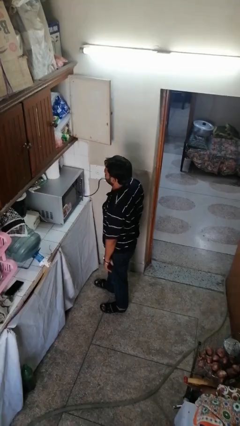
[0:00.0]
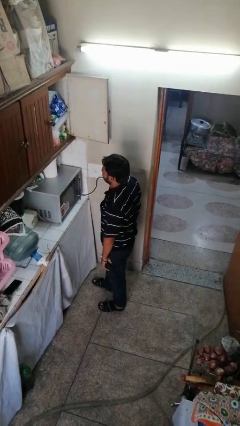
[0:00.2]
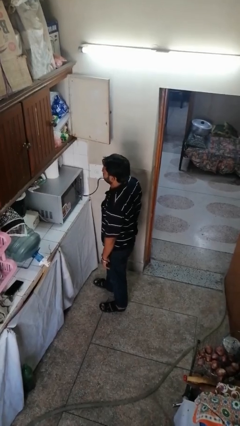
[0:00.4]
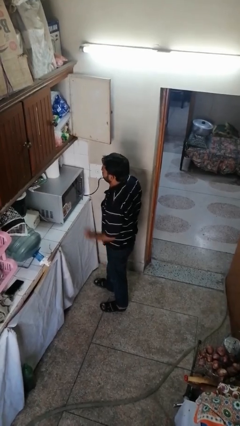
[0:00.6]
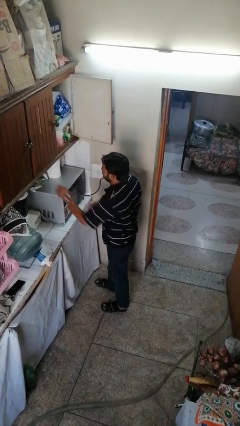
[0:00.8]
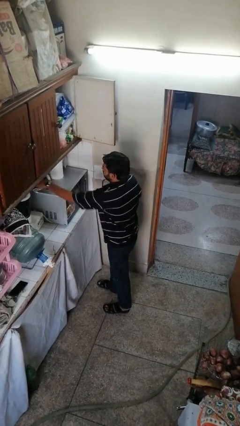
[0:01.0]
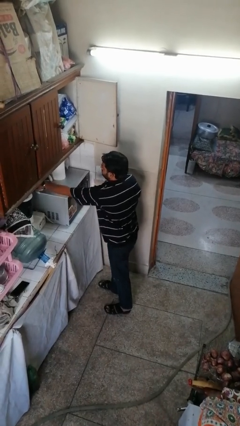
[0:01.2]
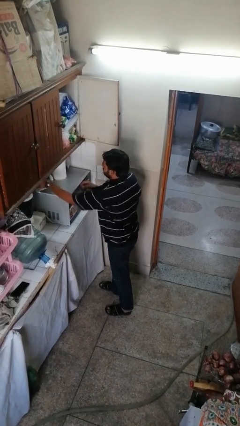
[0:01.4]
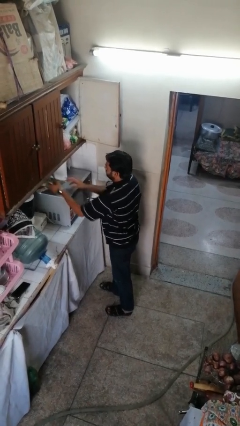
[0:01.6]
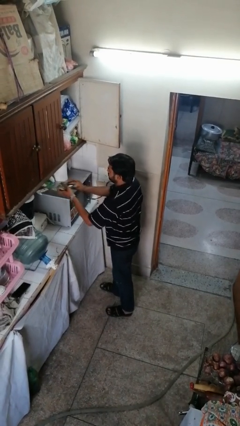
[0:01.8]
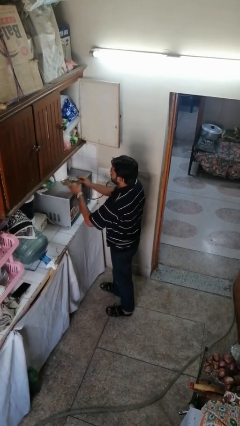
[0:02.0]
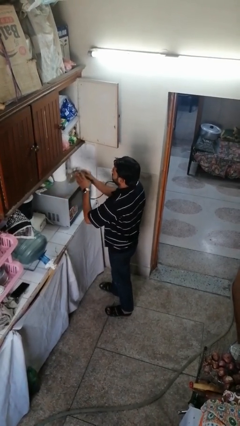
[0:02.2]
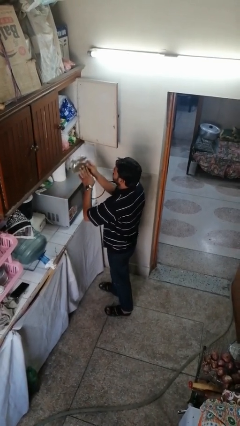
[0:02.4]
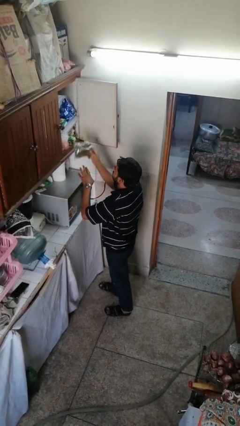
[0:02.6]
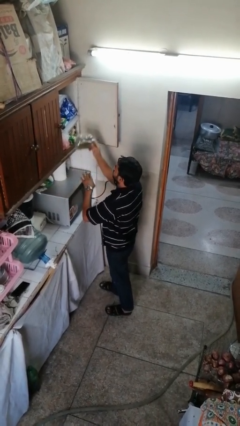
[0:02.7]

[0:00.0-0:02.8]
person loads groceries into cabinet

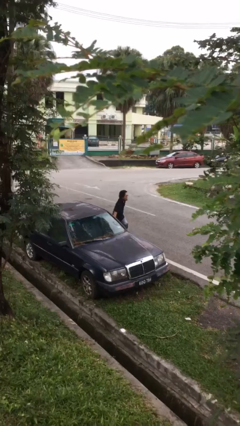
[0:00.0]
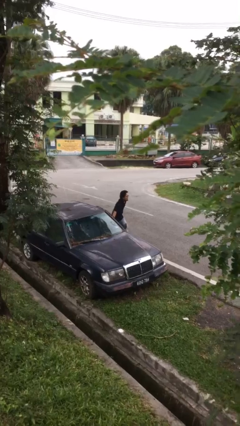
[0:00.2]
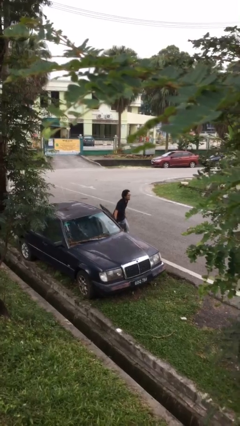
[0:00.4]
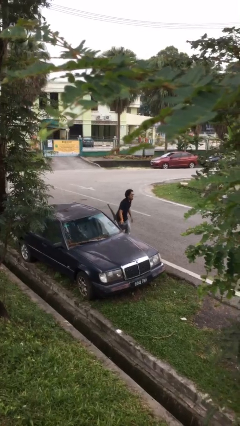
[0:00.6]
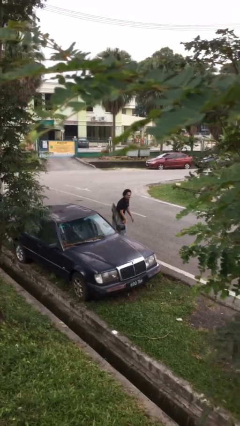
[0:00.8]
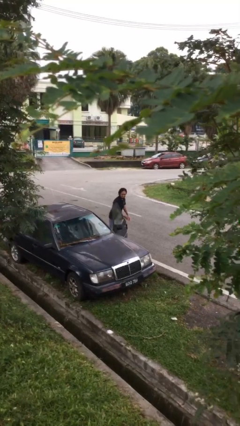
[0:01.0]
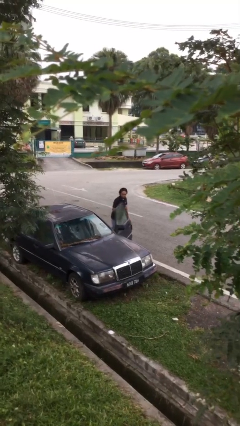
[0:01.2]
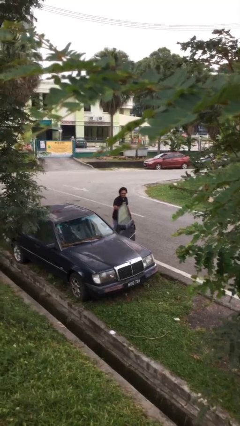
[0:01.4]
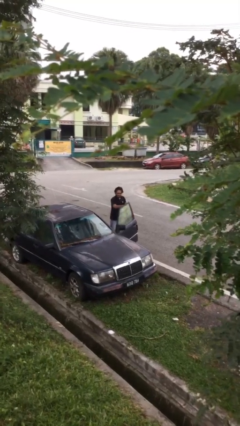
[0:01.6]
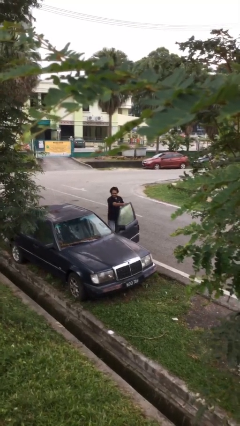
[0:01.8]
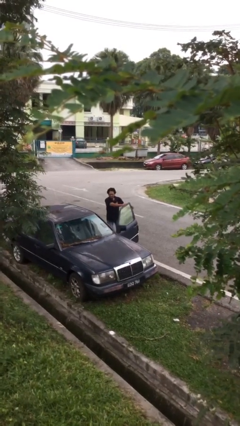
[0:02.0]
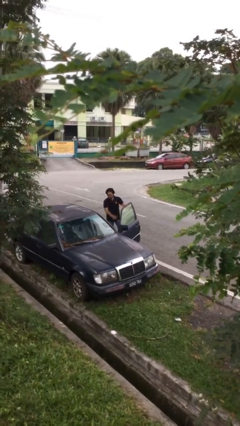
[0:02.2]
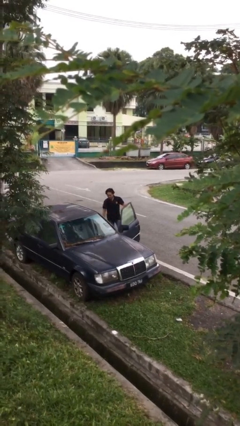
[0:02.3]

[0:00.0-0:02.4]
person opens car door

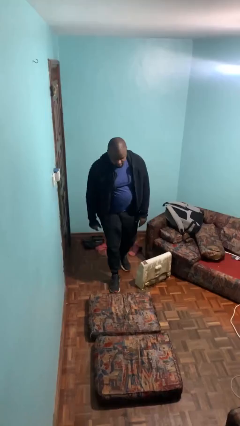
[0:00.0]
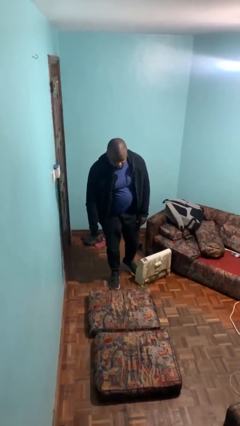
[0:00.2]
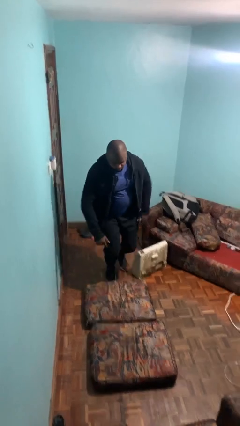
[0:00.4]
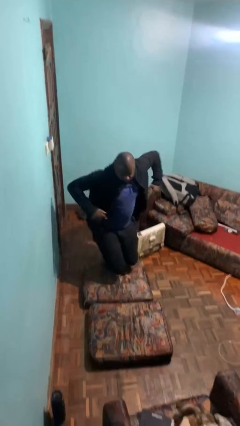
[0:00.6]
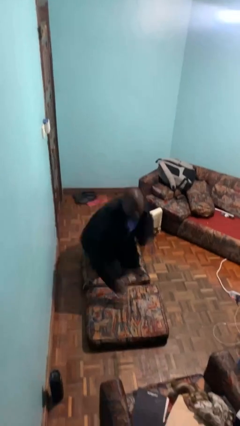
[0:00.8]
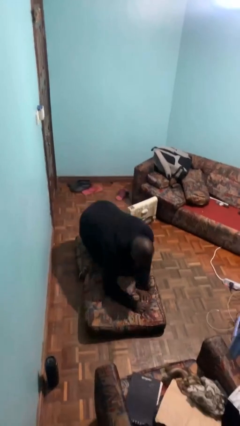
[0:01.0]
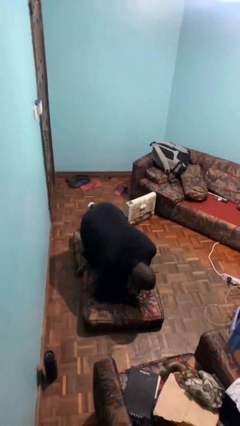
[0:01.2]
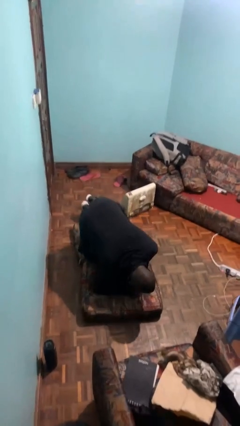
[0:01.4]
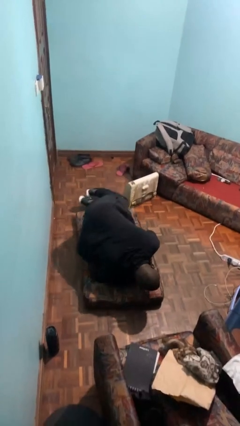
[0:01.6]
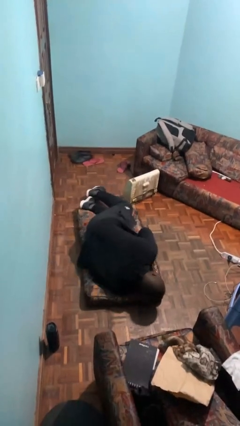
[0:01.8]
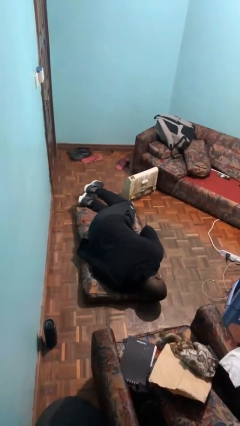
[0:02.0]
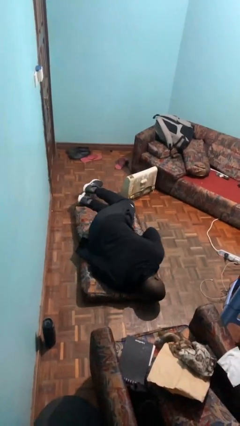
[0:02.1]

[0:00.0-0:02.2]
person trips on object on floor

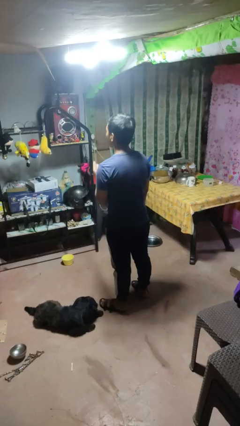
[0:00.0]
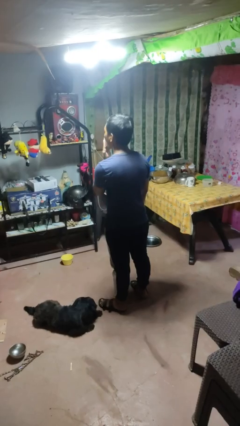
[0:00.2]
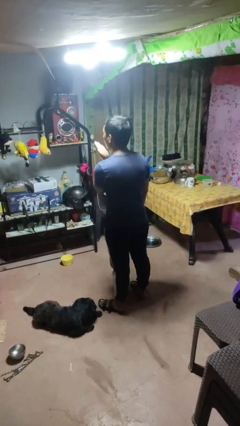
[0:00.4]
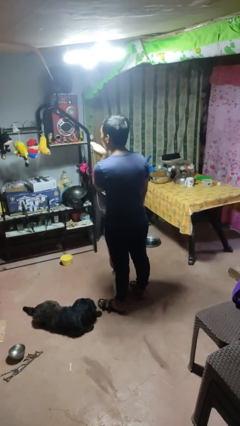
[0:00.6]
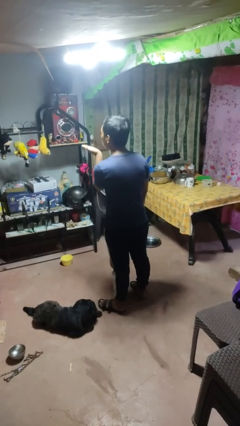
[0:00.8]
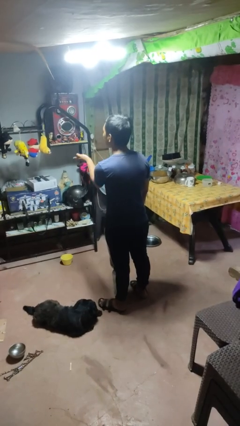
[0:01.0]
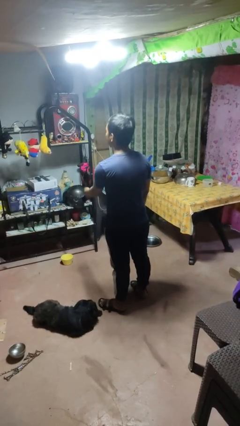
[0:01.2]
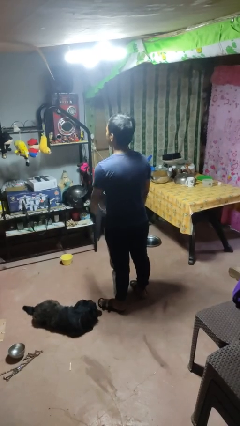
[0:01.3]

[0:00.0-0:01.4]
person gestures blow kiss

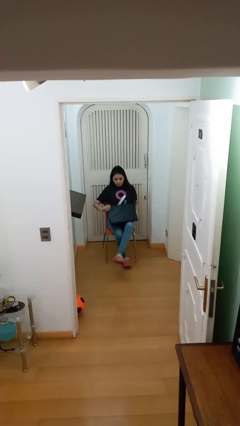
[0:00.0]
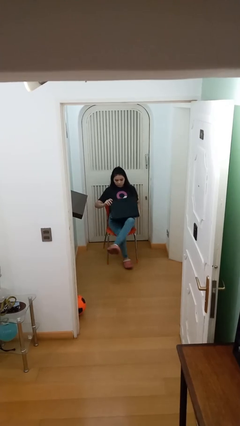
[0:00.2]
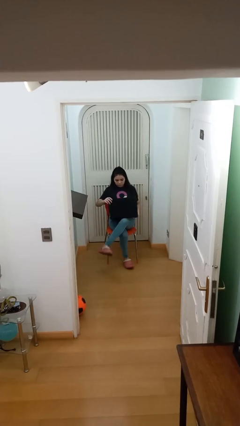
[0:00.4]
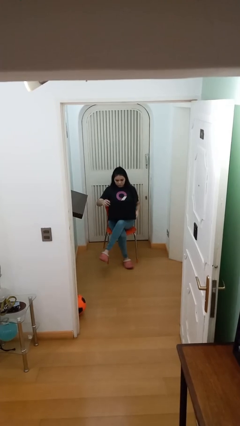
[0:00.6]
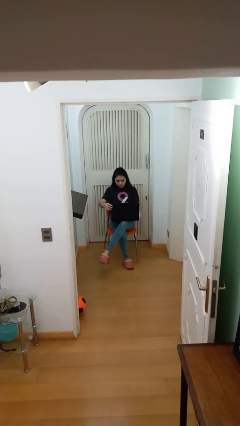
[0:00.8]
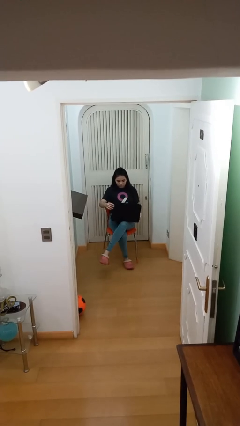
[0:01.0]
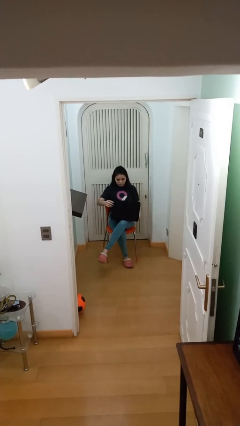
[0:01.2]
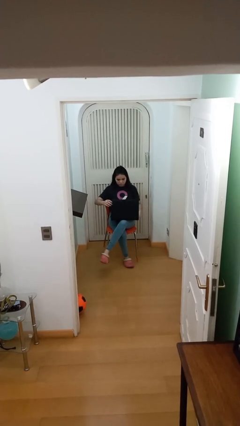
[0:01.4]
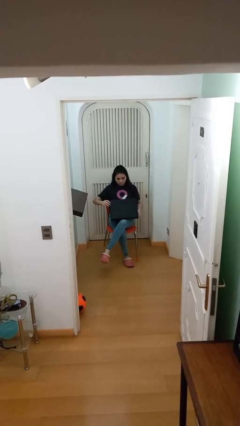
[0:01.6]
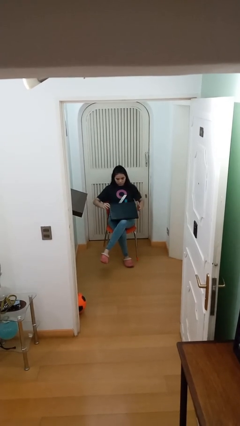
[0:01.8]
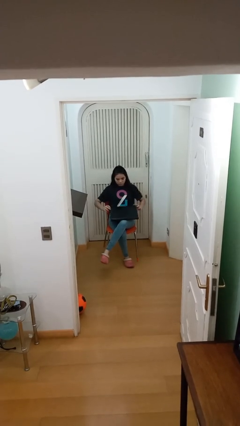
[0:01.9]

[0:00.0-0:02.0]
person interacts with laptop

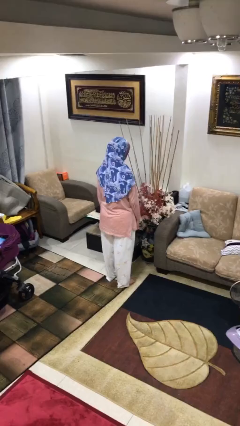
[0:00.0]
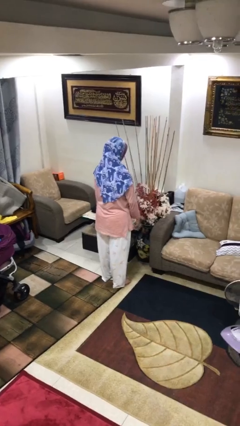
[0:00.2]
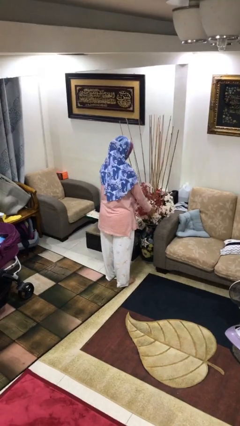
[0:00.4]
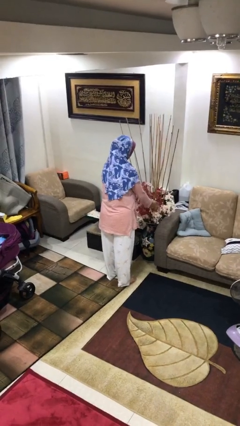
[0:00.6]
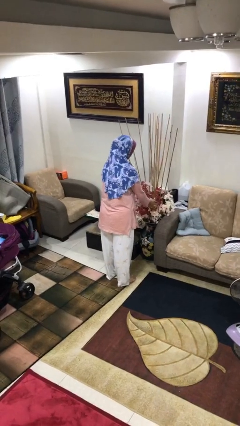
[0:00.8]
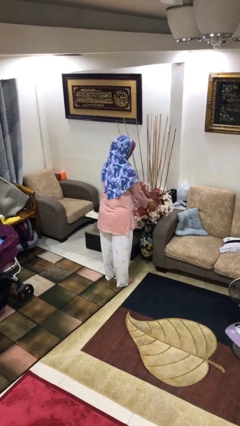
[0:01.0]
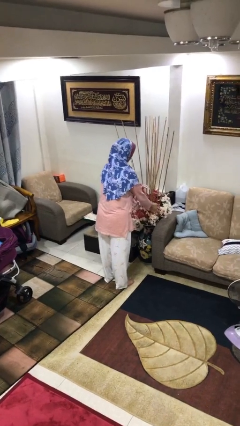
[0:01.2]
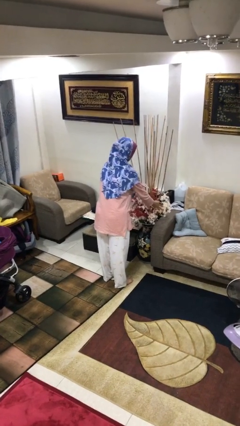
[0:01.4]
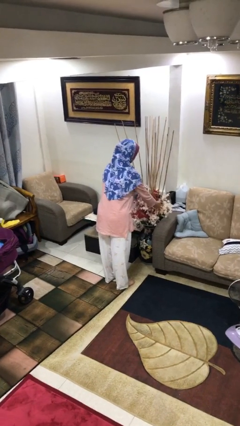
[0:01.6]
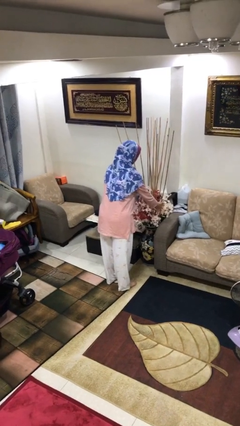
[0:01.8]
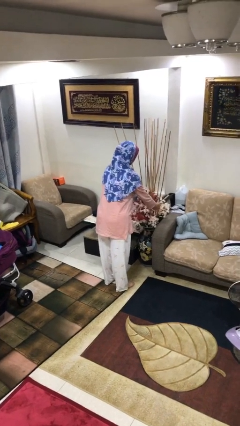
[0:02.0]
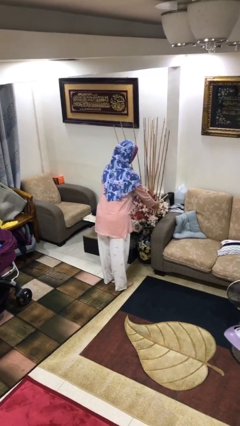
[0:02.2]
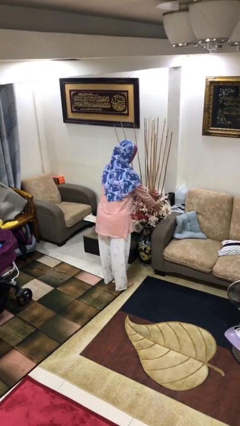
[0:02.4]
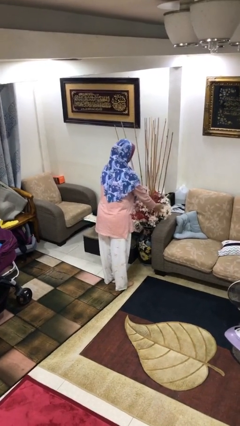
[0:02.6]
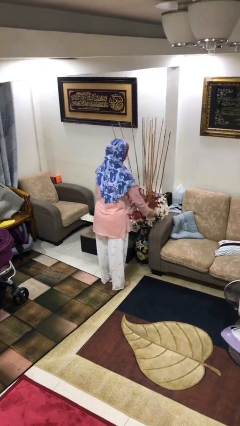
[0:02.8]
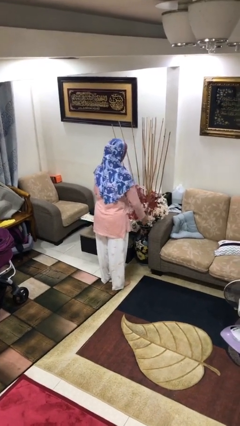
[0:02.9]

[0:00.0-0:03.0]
person arranges flowers in vase

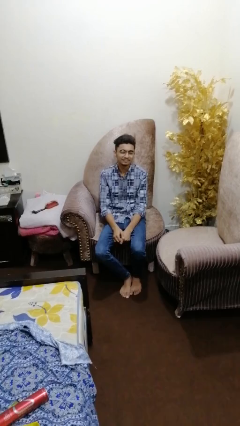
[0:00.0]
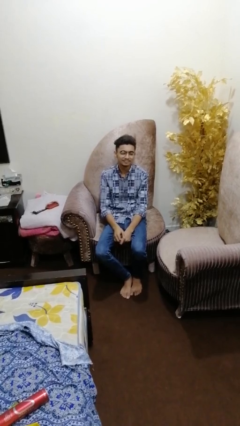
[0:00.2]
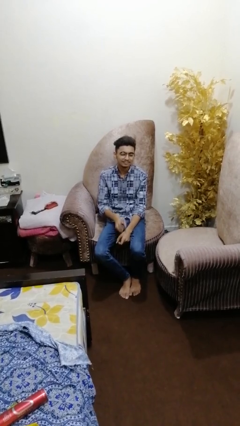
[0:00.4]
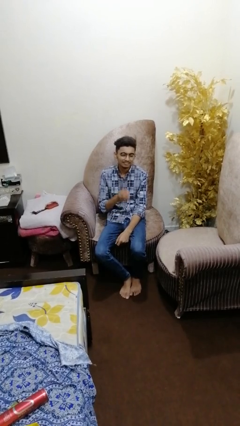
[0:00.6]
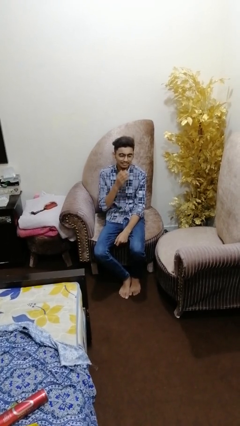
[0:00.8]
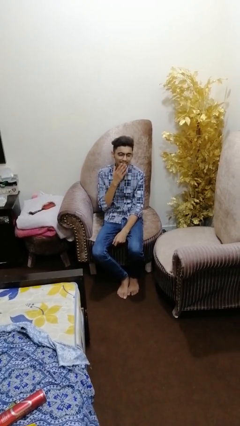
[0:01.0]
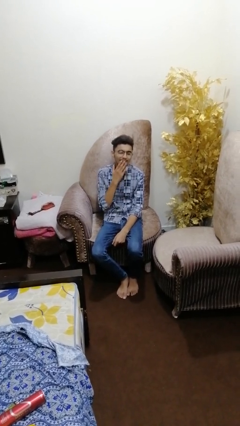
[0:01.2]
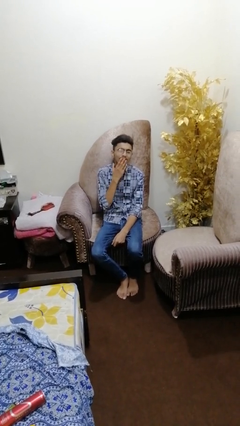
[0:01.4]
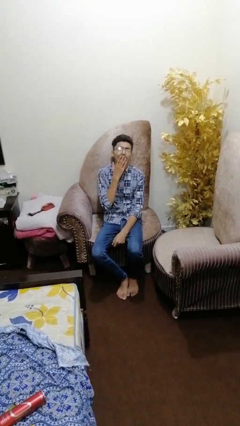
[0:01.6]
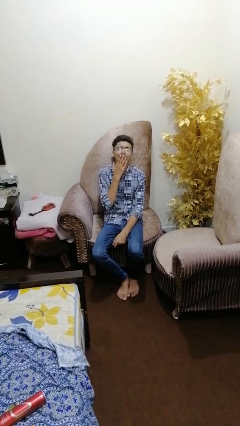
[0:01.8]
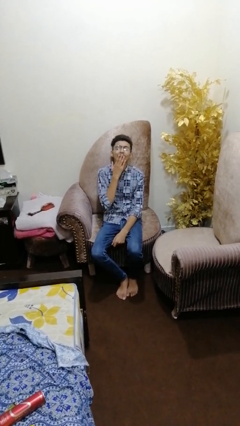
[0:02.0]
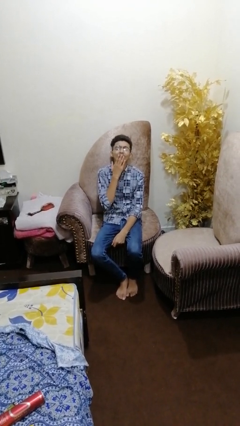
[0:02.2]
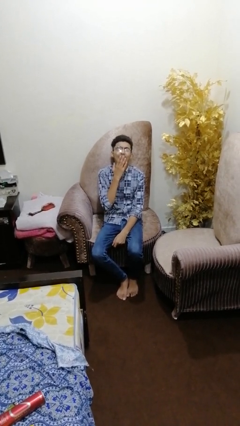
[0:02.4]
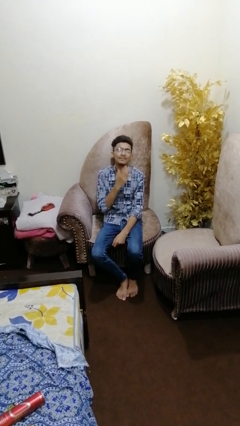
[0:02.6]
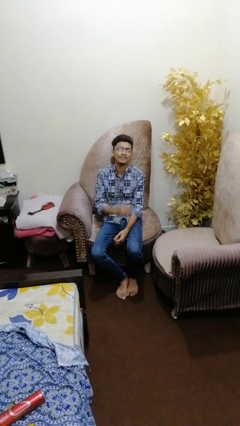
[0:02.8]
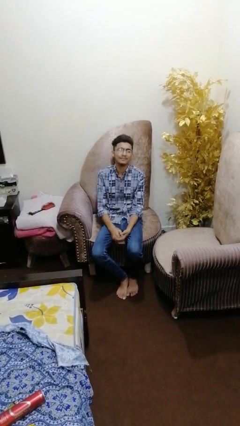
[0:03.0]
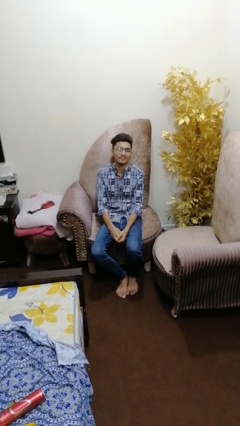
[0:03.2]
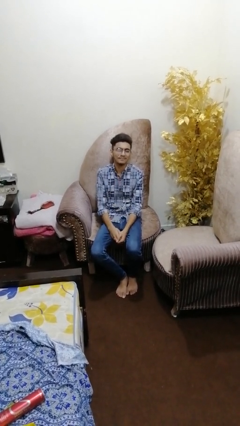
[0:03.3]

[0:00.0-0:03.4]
person yawns
